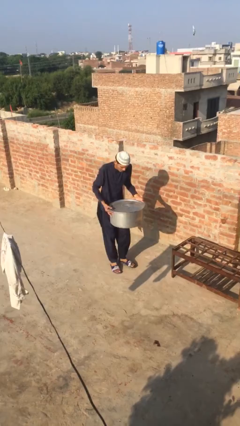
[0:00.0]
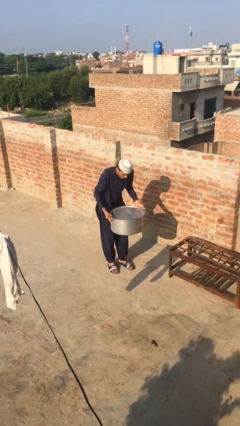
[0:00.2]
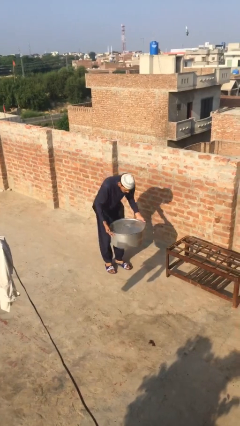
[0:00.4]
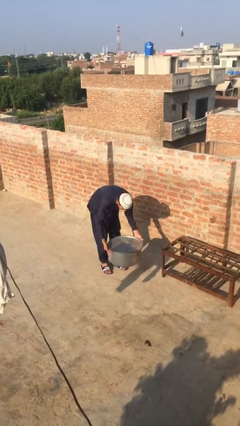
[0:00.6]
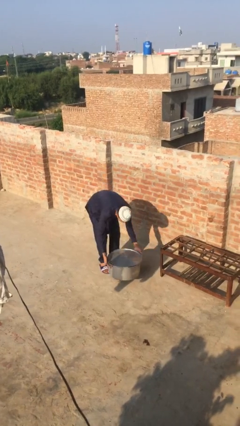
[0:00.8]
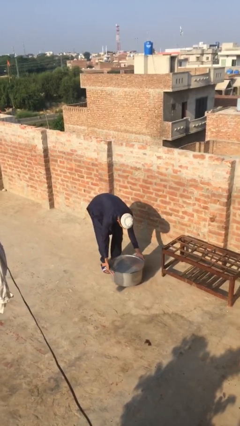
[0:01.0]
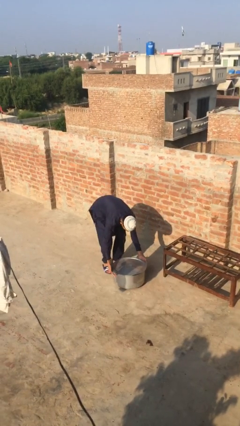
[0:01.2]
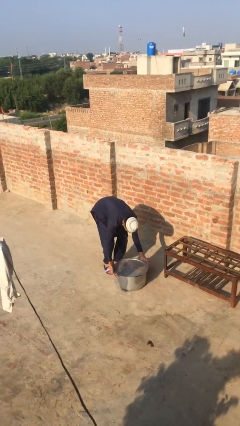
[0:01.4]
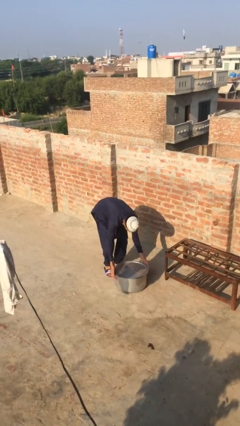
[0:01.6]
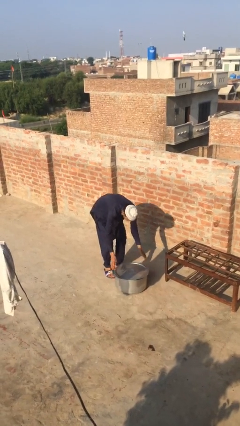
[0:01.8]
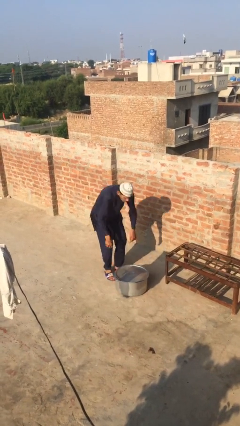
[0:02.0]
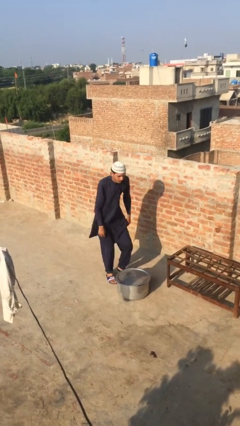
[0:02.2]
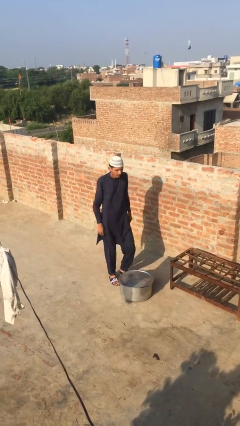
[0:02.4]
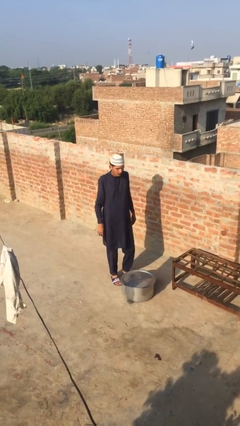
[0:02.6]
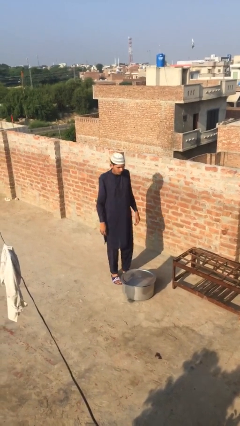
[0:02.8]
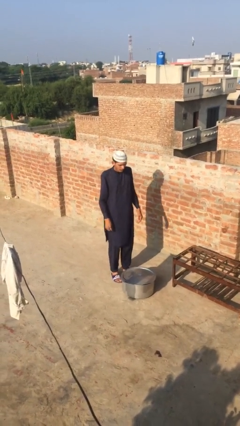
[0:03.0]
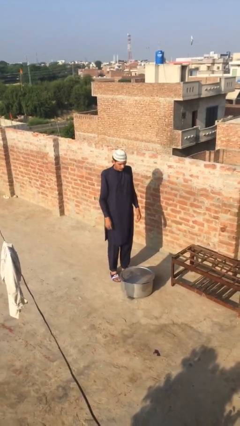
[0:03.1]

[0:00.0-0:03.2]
person puts down object on floor

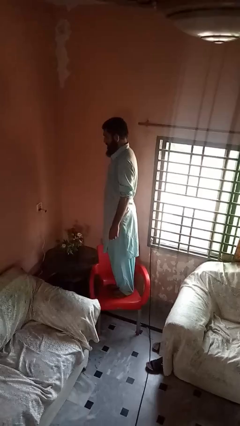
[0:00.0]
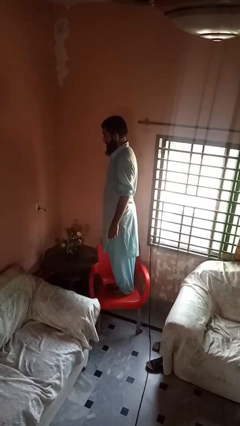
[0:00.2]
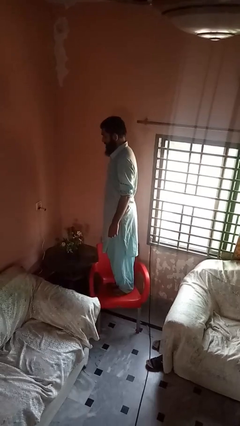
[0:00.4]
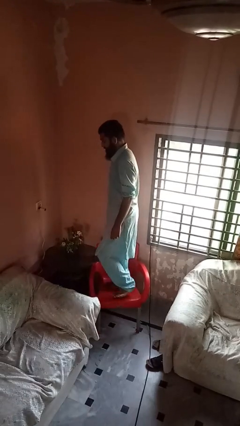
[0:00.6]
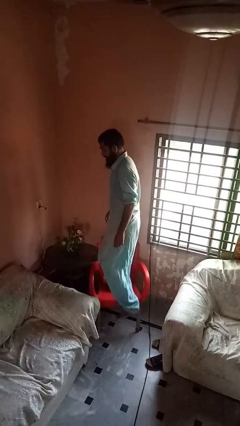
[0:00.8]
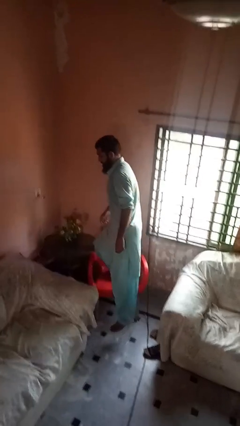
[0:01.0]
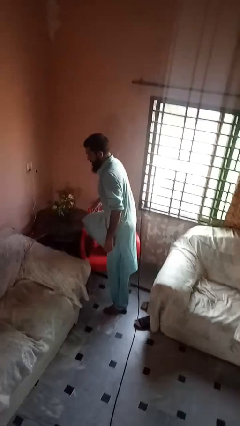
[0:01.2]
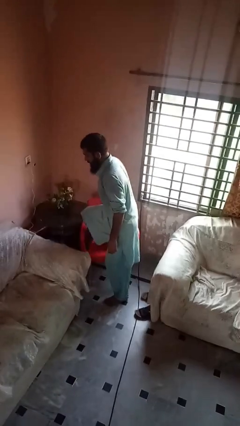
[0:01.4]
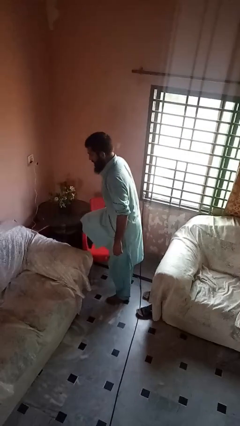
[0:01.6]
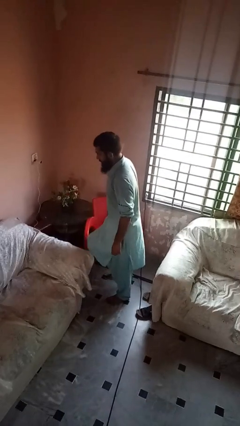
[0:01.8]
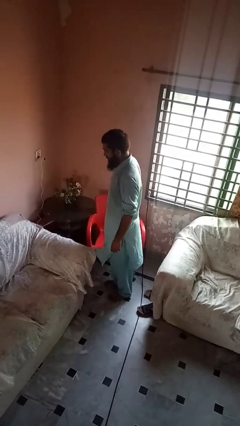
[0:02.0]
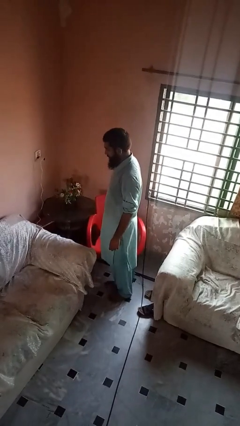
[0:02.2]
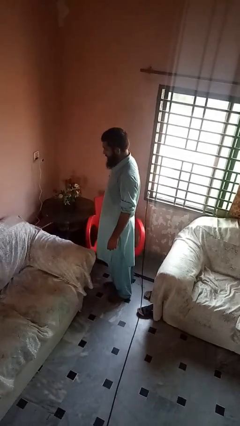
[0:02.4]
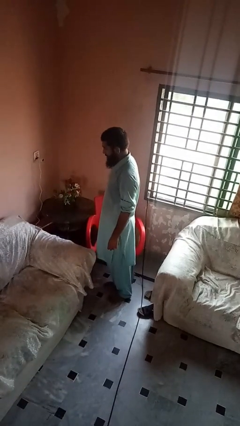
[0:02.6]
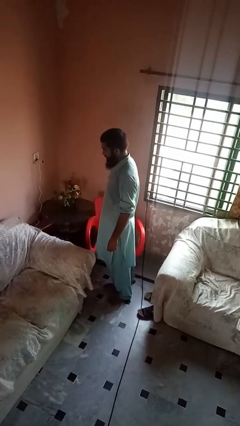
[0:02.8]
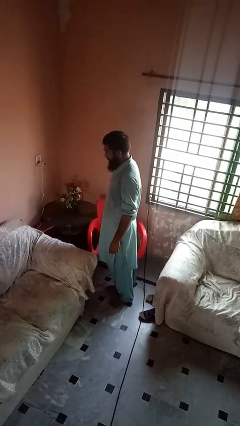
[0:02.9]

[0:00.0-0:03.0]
person climbs off chair

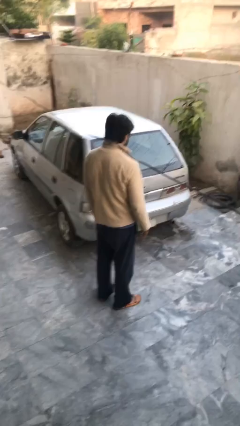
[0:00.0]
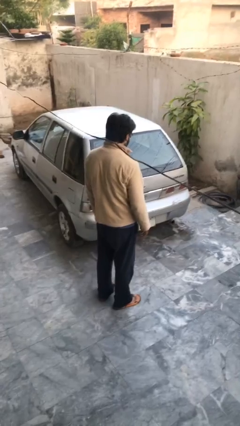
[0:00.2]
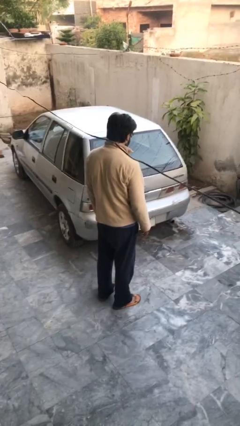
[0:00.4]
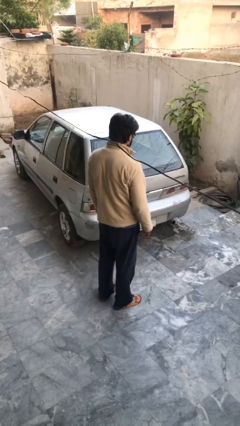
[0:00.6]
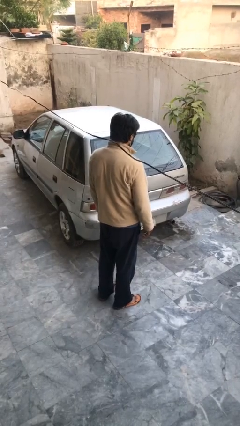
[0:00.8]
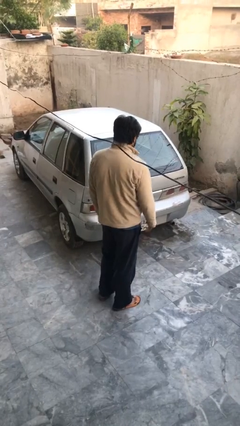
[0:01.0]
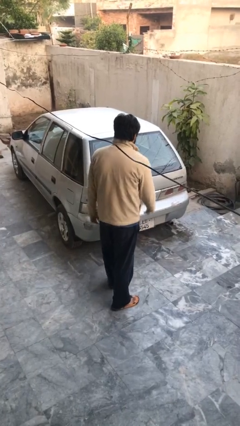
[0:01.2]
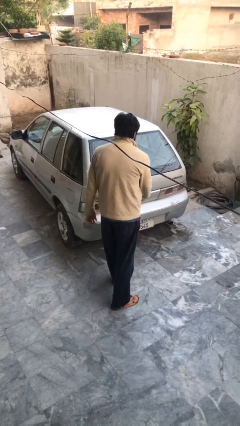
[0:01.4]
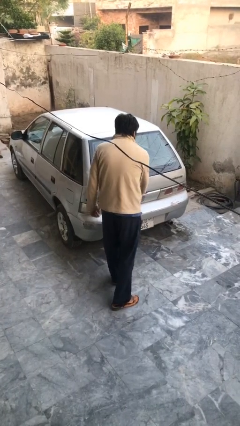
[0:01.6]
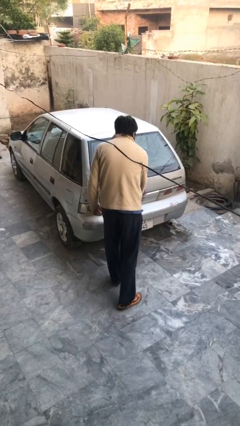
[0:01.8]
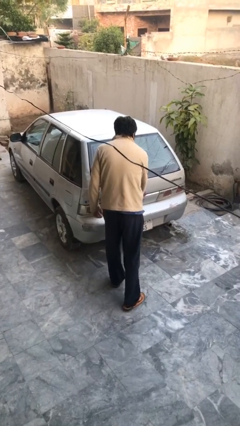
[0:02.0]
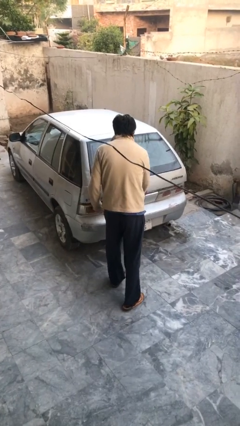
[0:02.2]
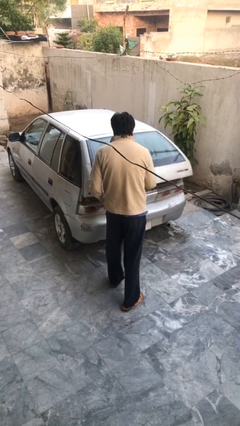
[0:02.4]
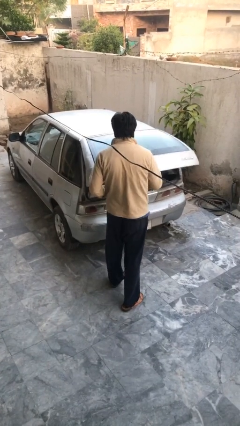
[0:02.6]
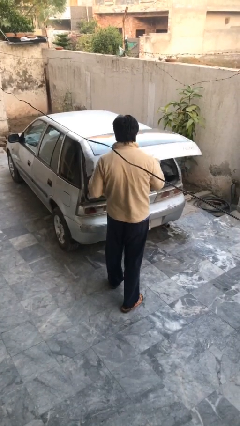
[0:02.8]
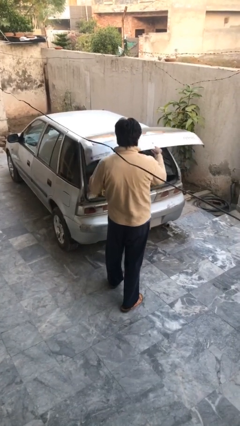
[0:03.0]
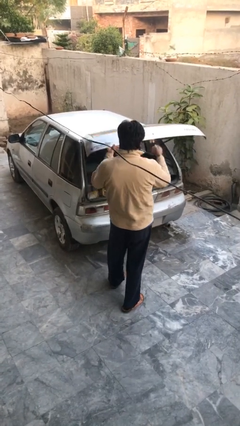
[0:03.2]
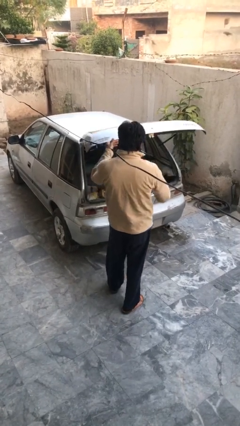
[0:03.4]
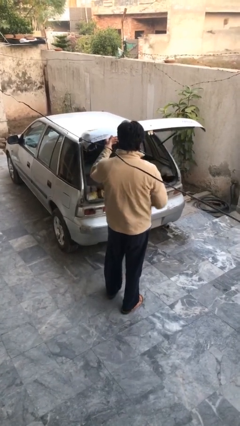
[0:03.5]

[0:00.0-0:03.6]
person opens car trunk

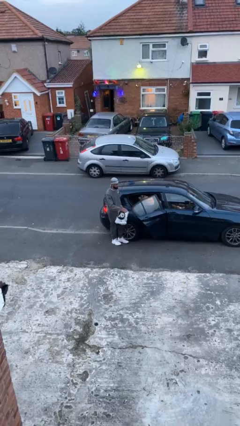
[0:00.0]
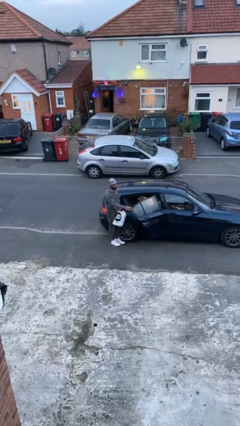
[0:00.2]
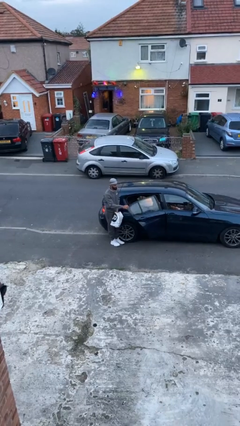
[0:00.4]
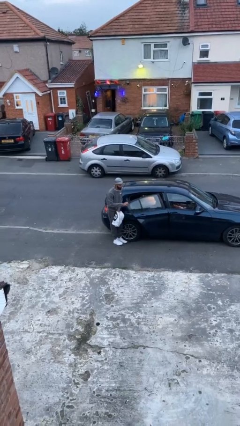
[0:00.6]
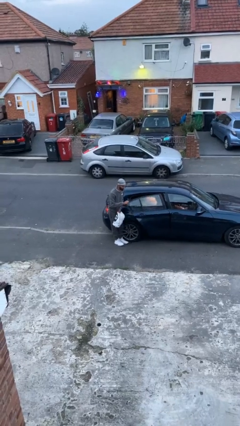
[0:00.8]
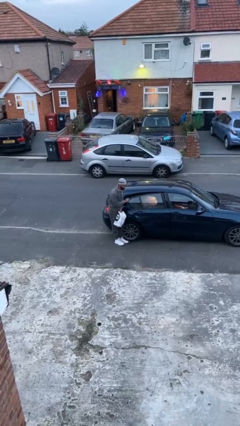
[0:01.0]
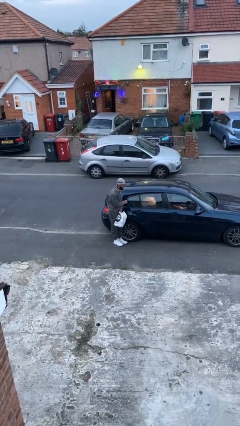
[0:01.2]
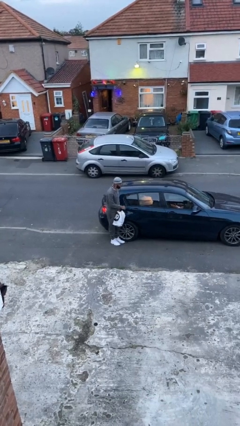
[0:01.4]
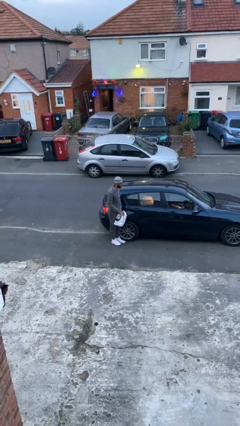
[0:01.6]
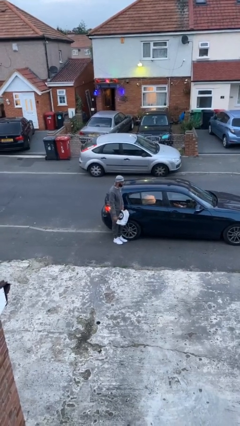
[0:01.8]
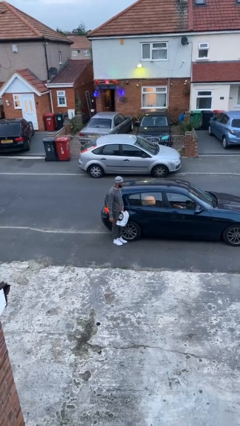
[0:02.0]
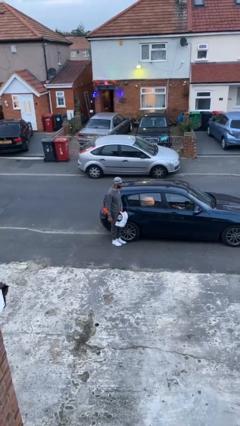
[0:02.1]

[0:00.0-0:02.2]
person closes car door

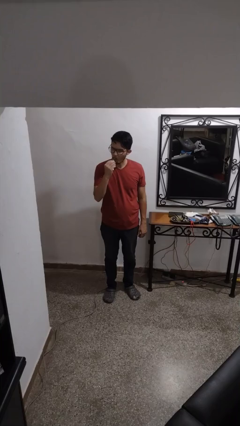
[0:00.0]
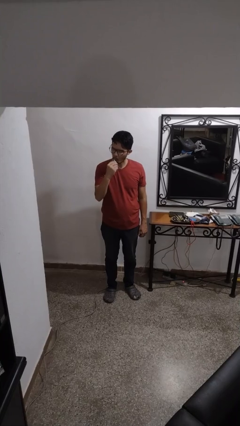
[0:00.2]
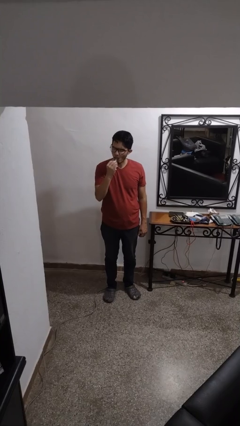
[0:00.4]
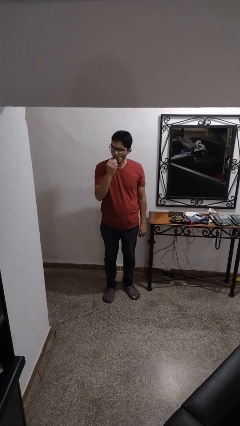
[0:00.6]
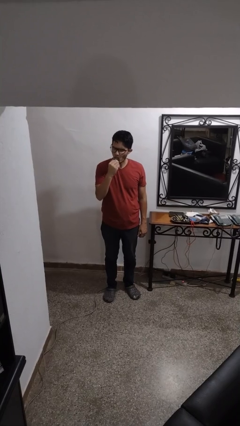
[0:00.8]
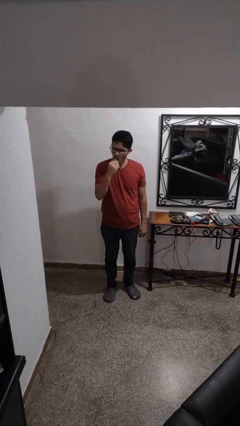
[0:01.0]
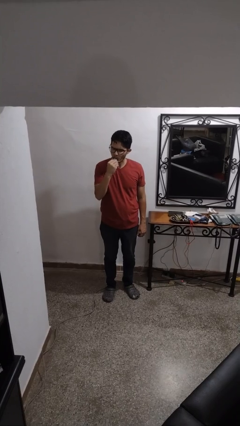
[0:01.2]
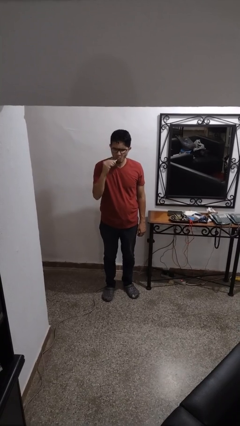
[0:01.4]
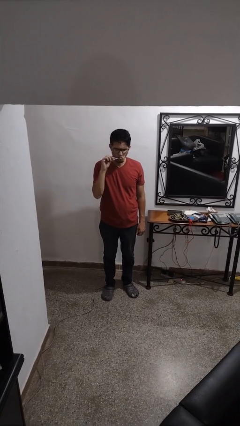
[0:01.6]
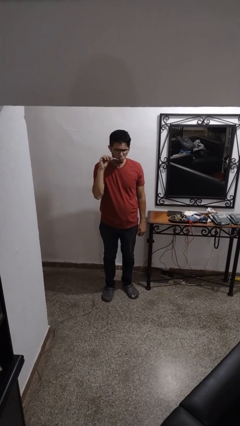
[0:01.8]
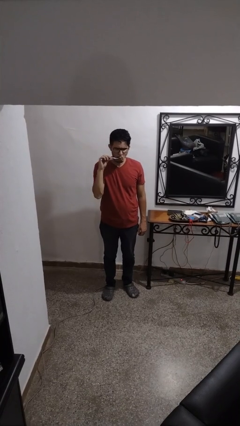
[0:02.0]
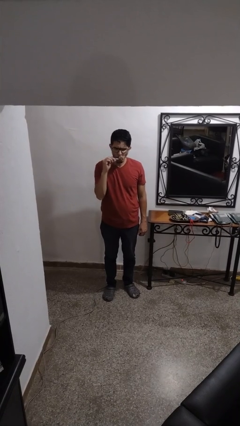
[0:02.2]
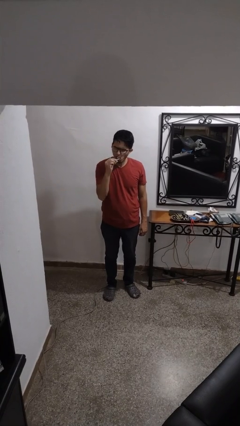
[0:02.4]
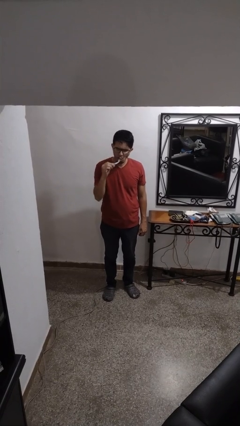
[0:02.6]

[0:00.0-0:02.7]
person brushes teeth

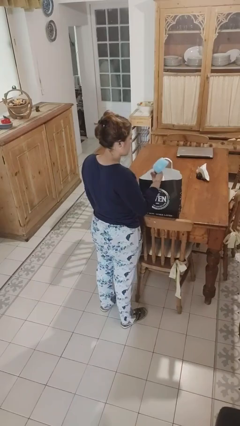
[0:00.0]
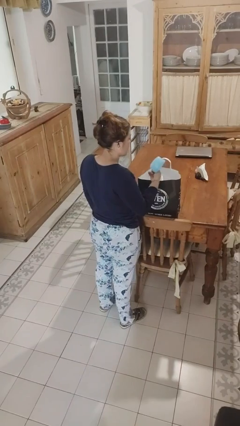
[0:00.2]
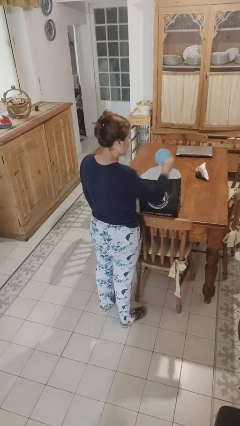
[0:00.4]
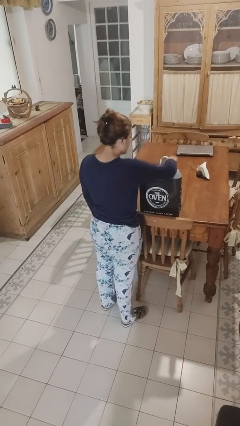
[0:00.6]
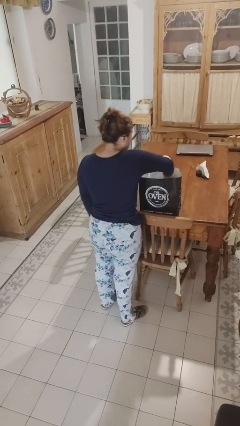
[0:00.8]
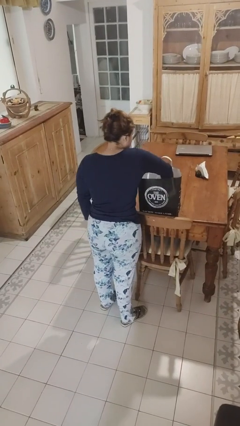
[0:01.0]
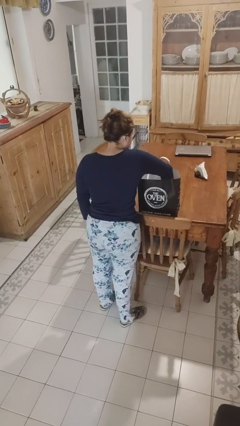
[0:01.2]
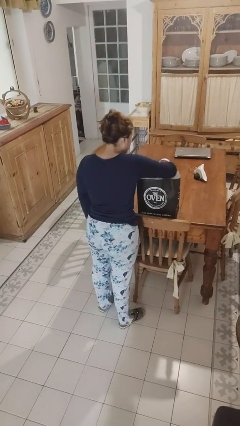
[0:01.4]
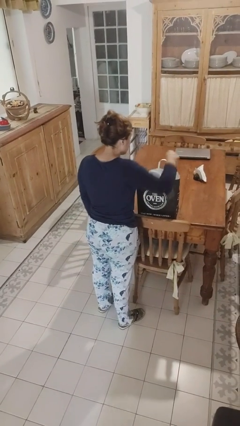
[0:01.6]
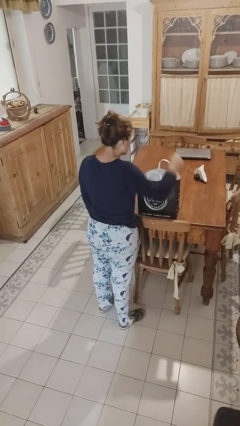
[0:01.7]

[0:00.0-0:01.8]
person puts object into bag

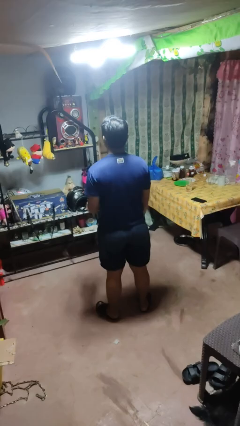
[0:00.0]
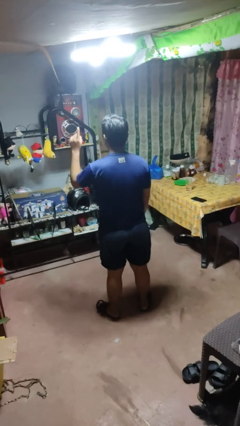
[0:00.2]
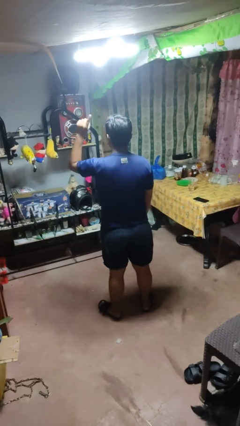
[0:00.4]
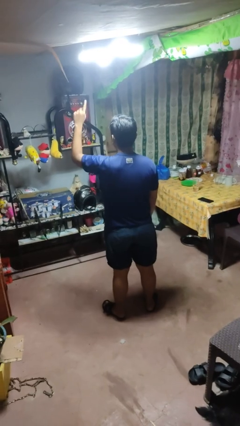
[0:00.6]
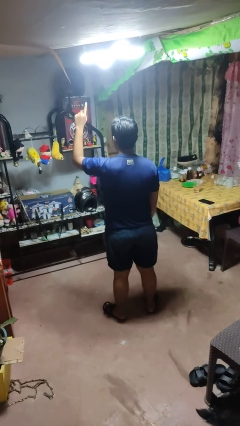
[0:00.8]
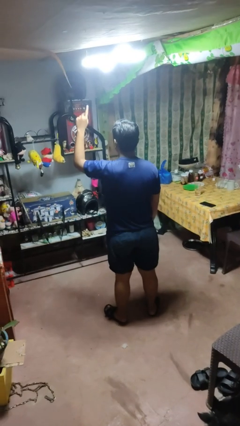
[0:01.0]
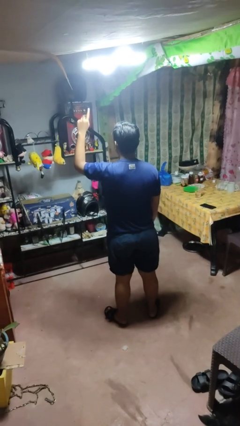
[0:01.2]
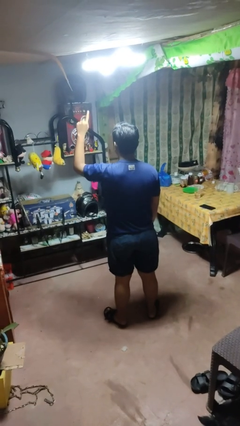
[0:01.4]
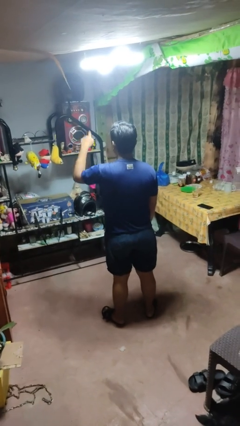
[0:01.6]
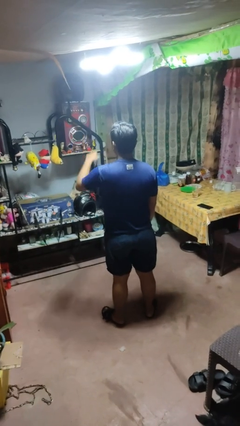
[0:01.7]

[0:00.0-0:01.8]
person gestures number one
